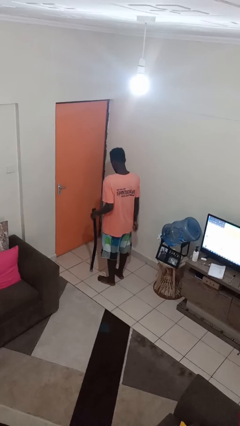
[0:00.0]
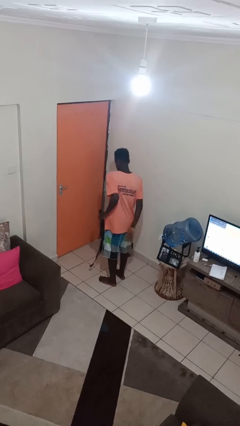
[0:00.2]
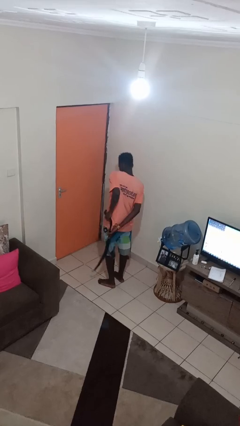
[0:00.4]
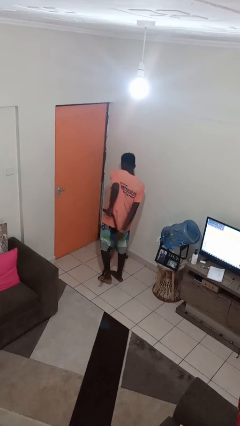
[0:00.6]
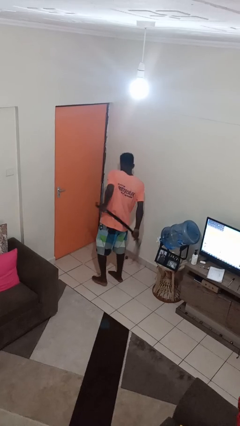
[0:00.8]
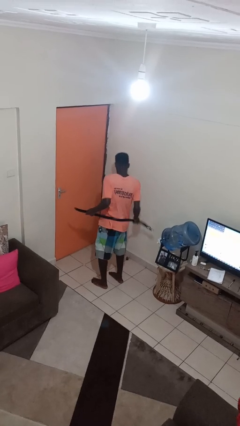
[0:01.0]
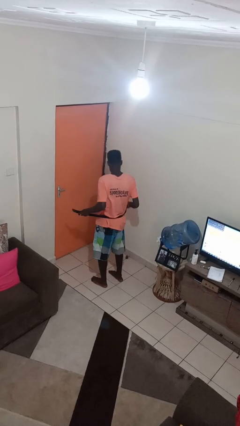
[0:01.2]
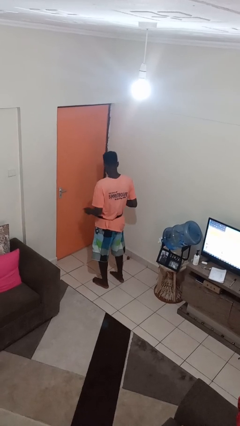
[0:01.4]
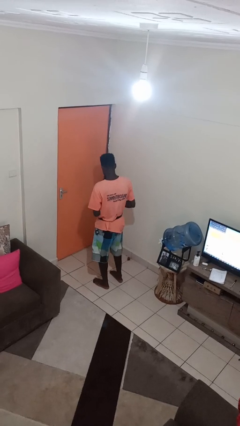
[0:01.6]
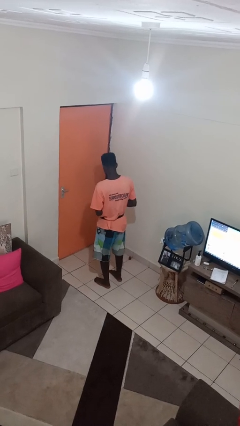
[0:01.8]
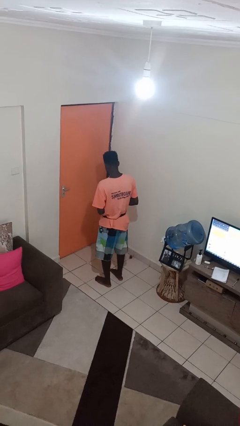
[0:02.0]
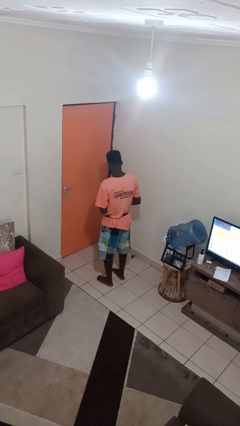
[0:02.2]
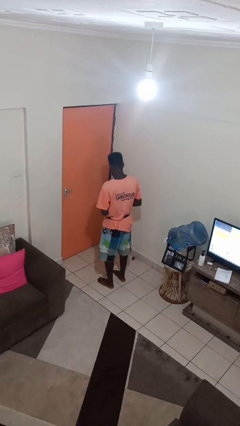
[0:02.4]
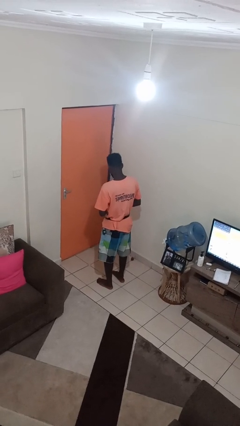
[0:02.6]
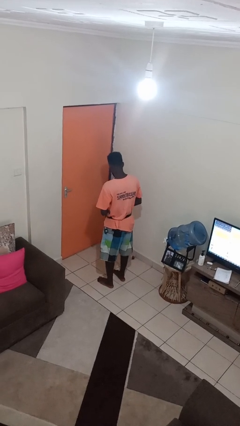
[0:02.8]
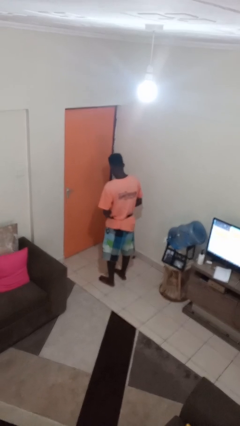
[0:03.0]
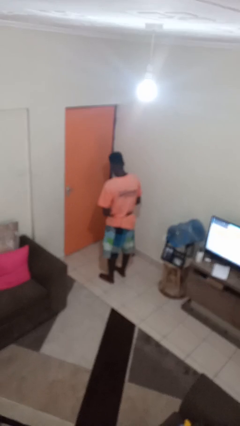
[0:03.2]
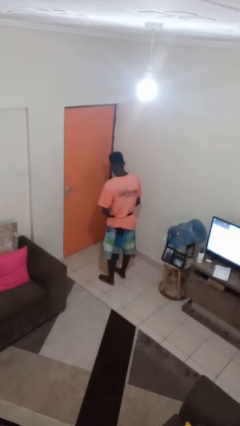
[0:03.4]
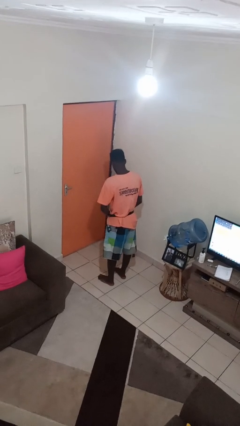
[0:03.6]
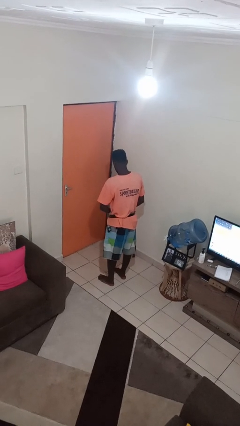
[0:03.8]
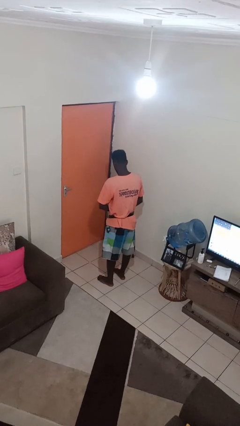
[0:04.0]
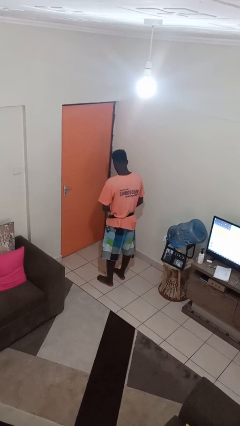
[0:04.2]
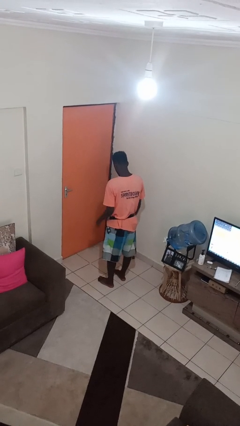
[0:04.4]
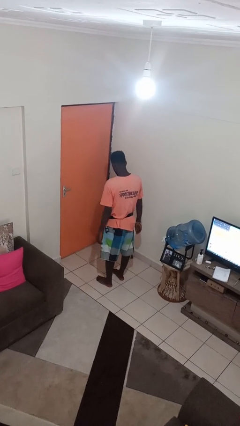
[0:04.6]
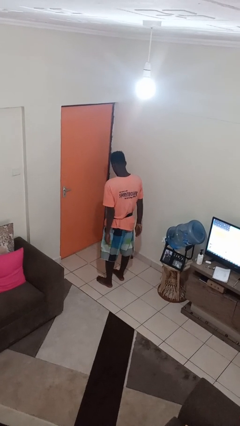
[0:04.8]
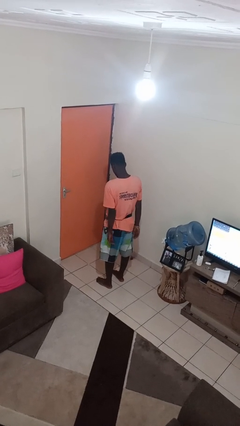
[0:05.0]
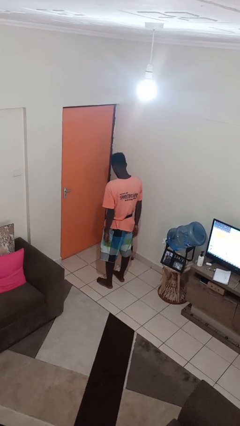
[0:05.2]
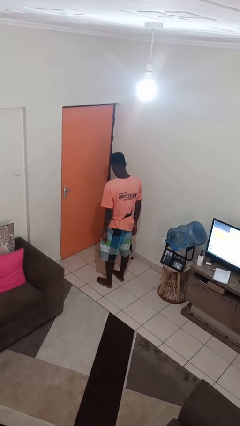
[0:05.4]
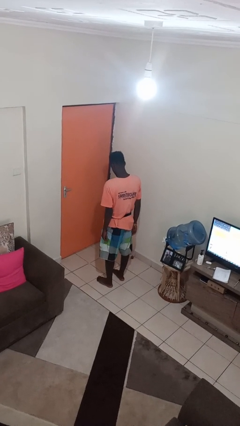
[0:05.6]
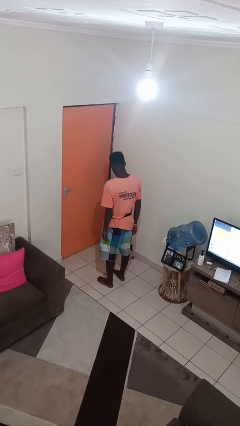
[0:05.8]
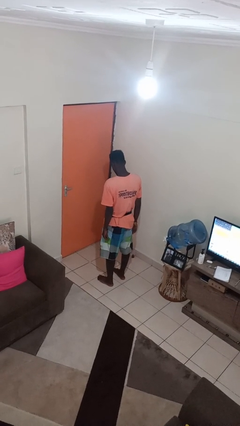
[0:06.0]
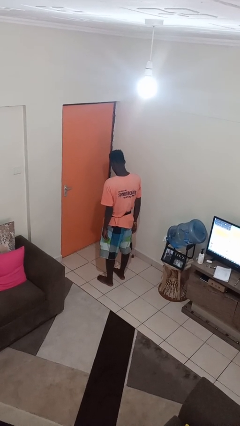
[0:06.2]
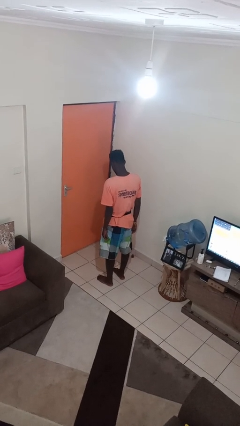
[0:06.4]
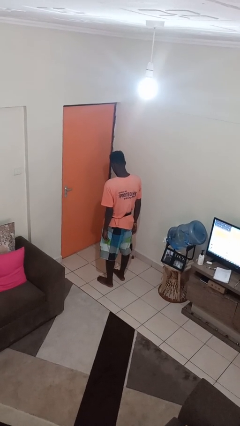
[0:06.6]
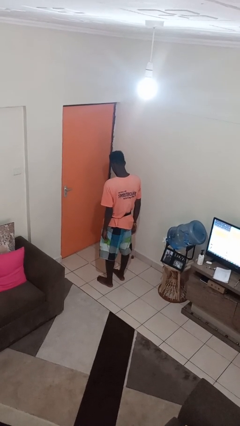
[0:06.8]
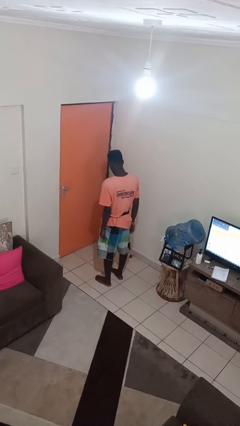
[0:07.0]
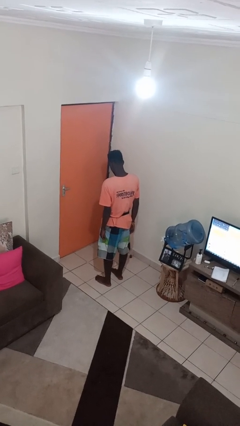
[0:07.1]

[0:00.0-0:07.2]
person puts on belt

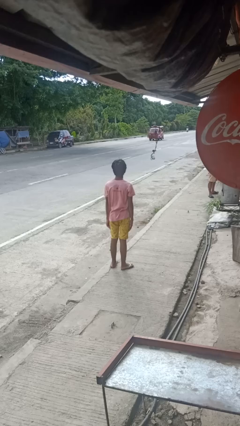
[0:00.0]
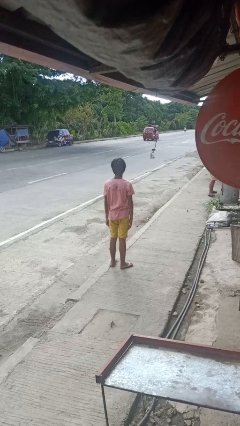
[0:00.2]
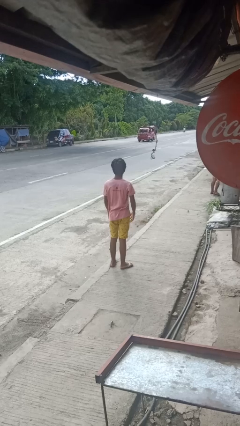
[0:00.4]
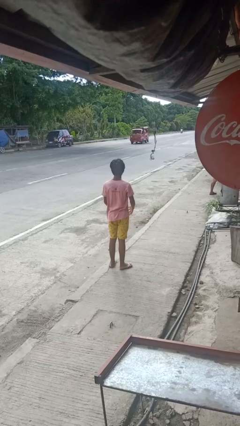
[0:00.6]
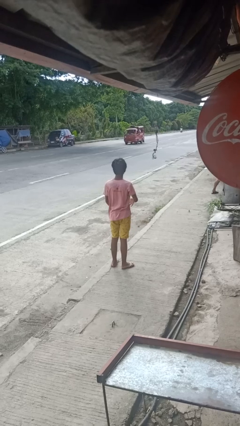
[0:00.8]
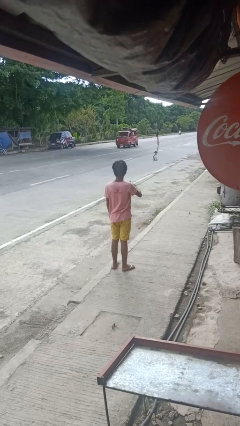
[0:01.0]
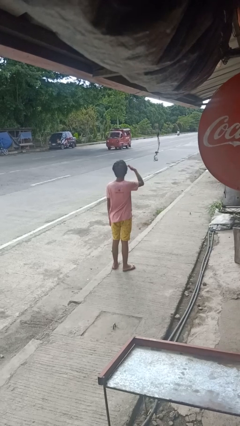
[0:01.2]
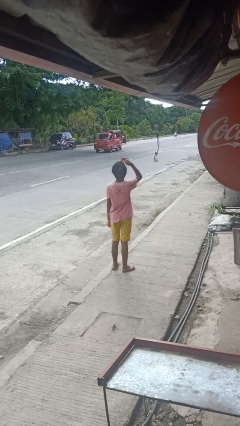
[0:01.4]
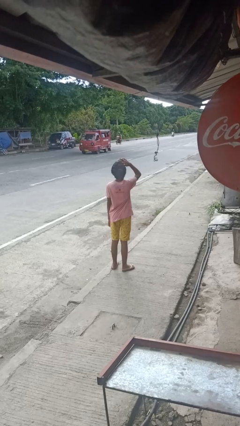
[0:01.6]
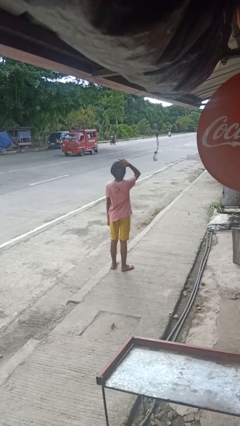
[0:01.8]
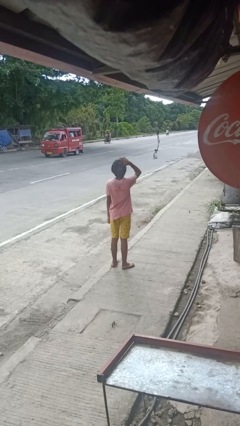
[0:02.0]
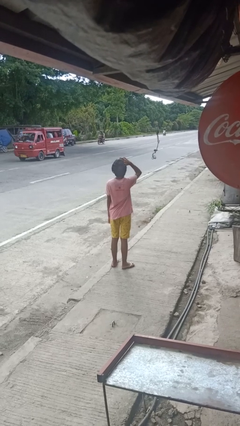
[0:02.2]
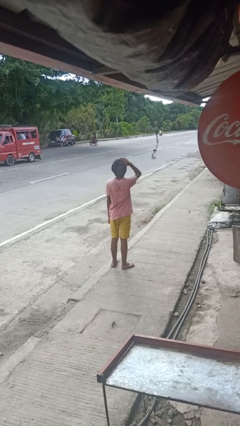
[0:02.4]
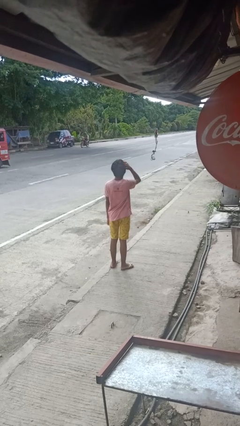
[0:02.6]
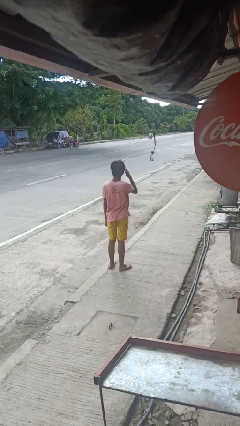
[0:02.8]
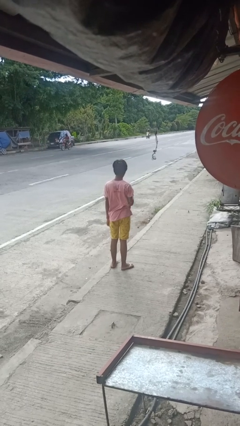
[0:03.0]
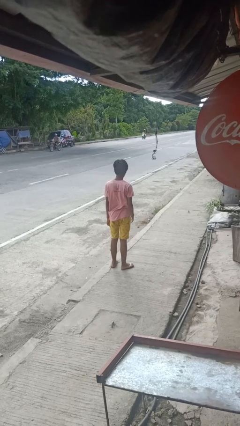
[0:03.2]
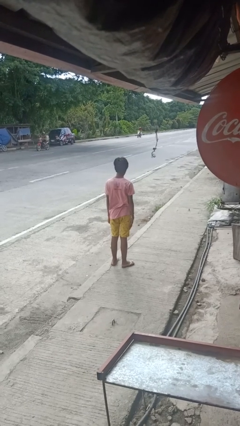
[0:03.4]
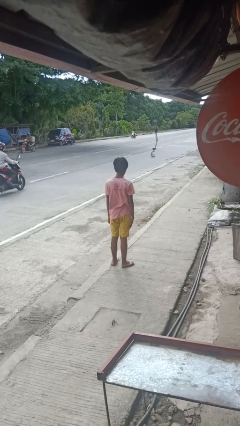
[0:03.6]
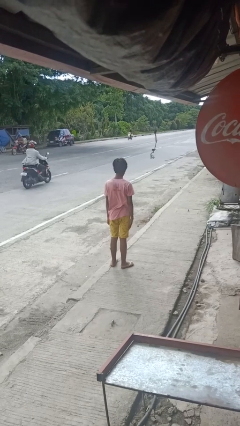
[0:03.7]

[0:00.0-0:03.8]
person shades eyes

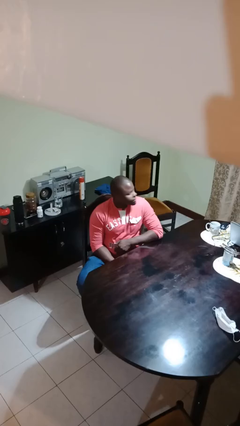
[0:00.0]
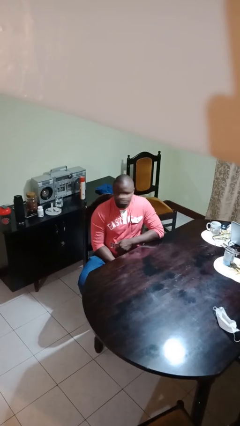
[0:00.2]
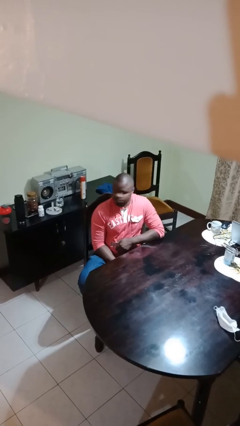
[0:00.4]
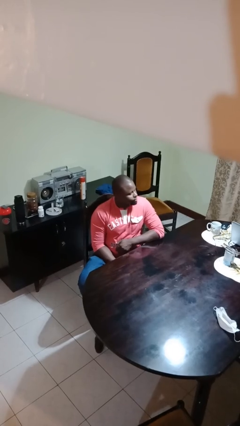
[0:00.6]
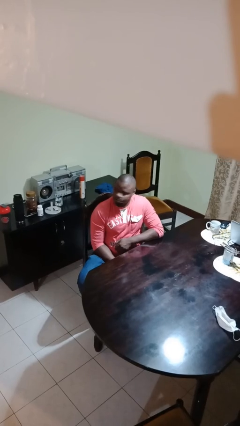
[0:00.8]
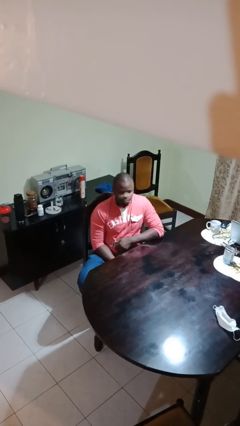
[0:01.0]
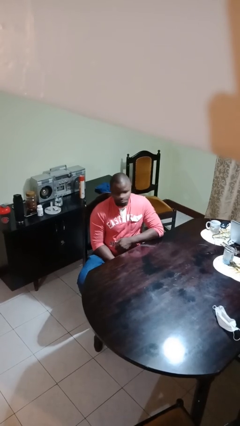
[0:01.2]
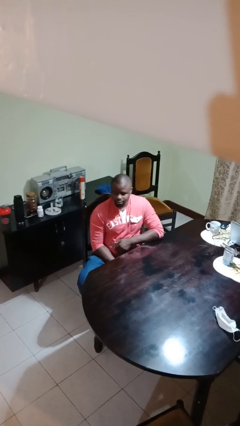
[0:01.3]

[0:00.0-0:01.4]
person shakes head

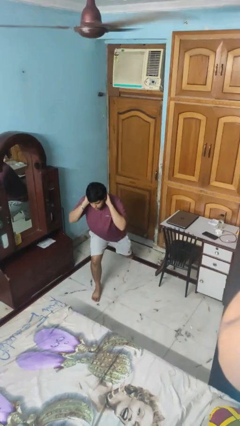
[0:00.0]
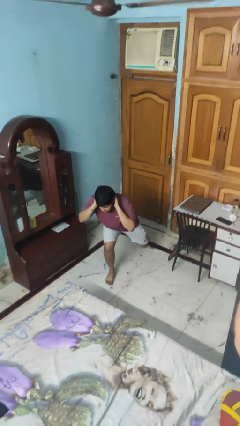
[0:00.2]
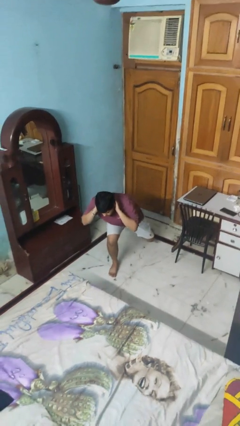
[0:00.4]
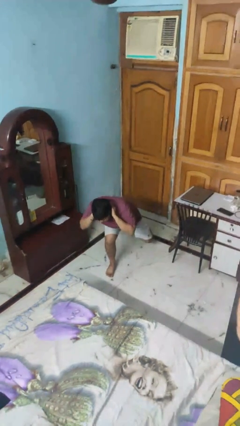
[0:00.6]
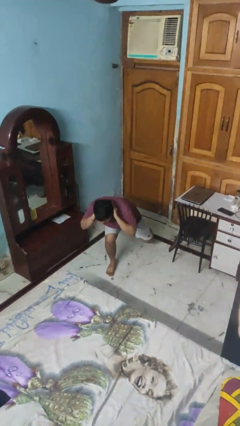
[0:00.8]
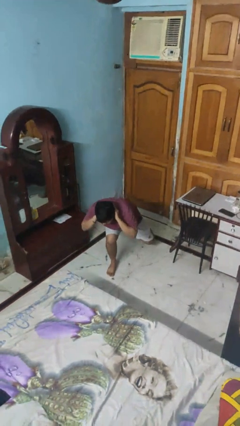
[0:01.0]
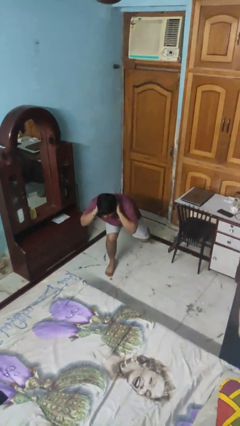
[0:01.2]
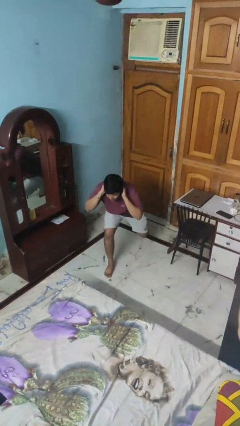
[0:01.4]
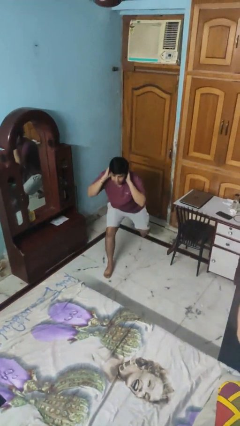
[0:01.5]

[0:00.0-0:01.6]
person exercises with lunges

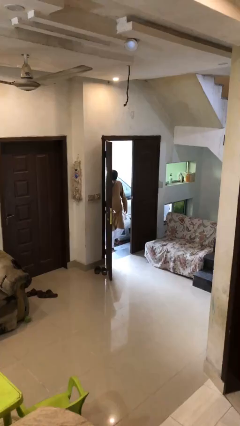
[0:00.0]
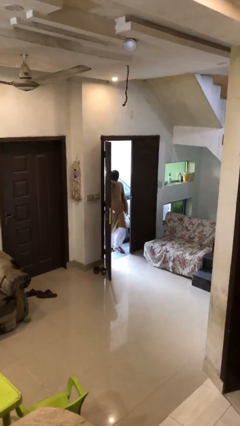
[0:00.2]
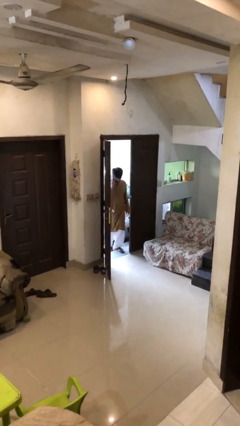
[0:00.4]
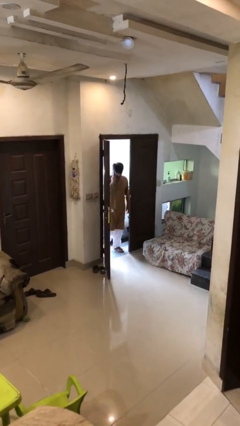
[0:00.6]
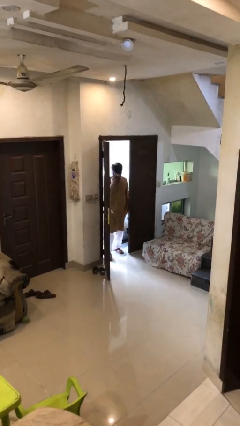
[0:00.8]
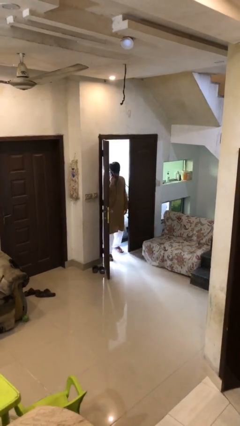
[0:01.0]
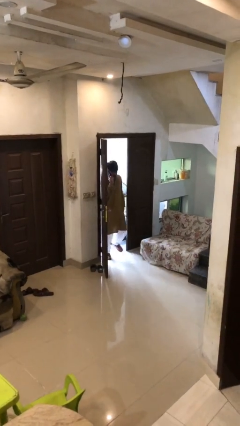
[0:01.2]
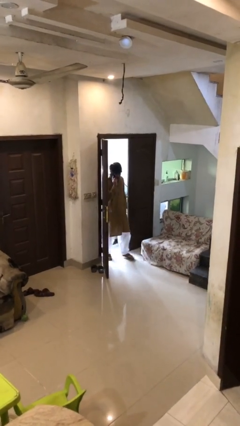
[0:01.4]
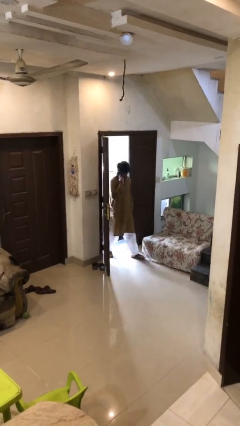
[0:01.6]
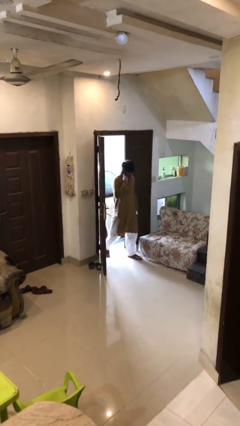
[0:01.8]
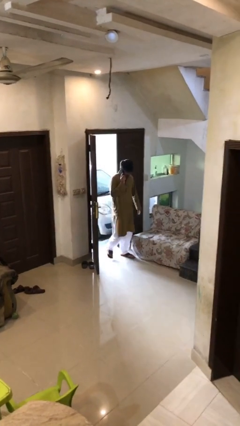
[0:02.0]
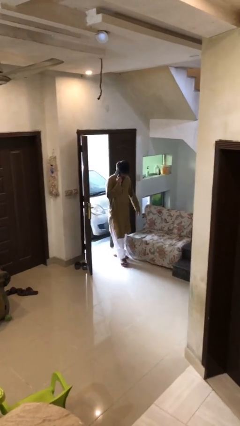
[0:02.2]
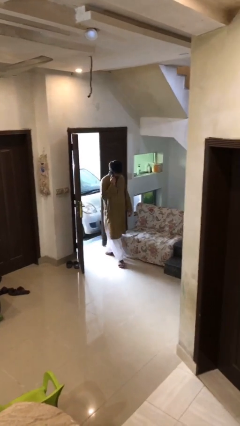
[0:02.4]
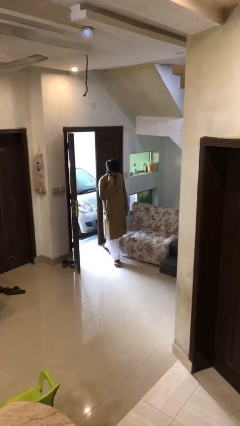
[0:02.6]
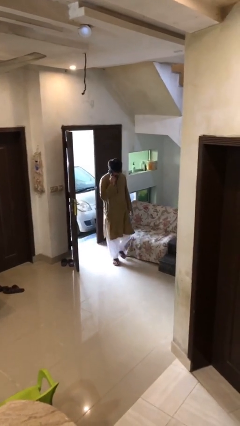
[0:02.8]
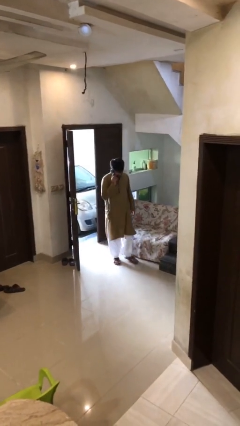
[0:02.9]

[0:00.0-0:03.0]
person enters scene through structure
